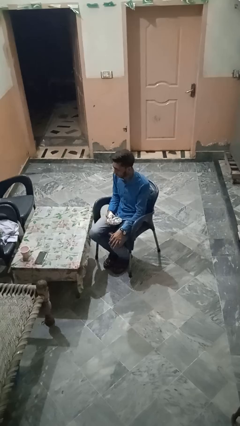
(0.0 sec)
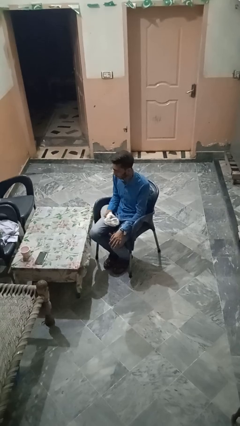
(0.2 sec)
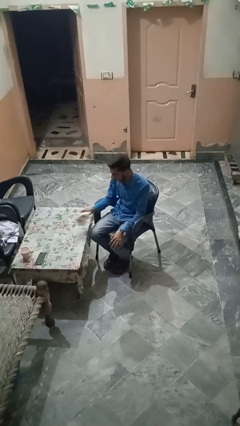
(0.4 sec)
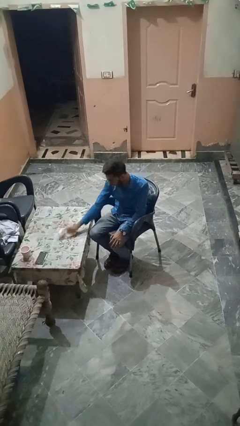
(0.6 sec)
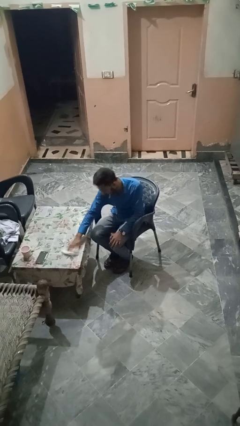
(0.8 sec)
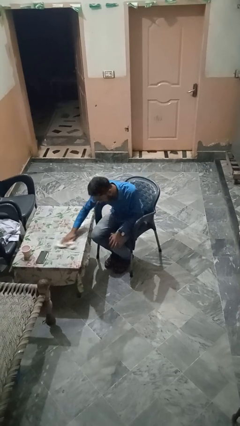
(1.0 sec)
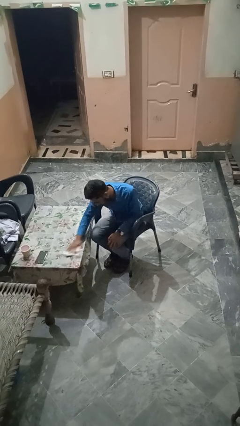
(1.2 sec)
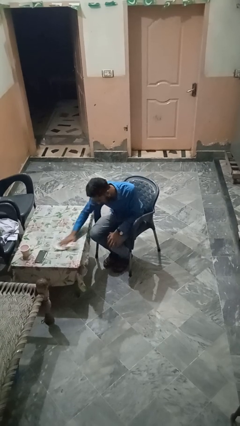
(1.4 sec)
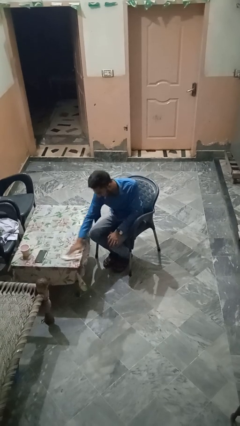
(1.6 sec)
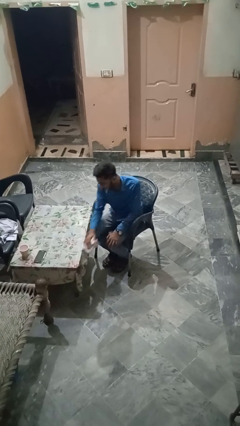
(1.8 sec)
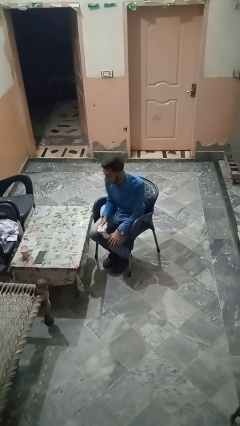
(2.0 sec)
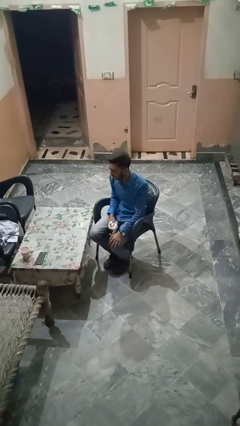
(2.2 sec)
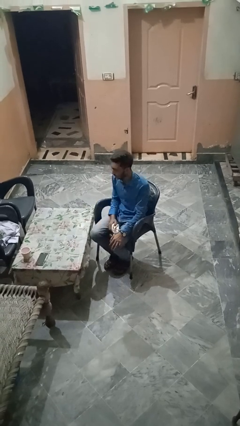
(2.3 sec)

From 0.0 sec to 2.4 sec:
person cleans table with rag

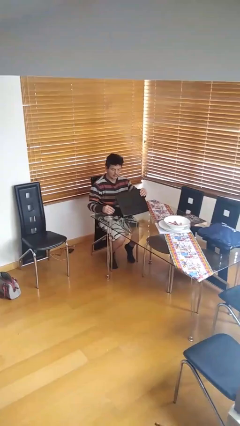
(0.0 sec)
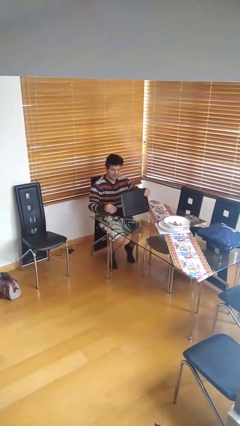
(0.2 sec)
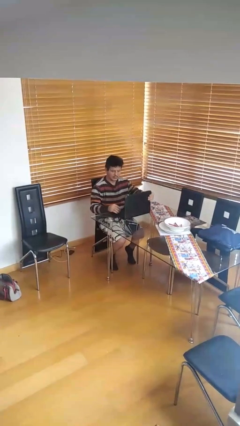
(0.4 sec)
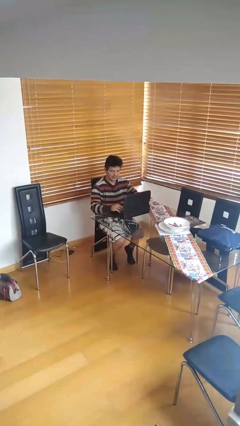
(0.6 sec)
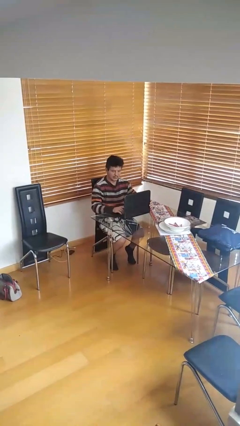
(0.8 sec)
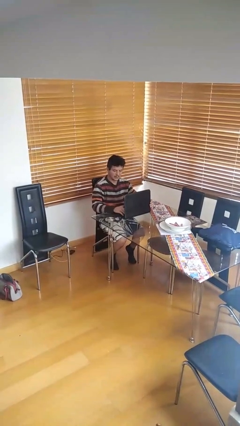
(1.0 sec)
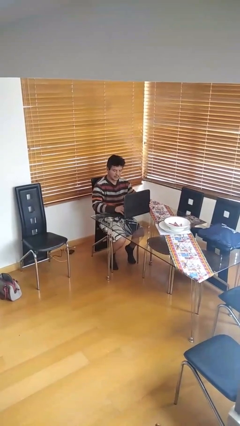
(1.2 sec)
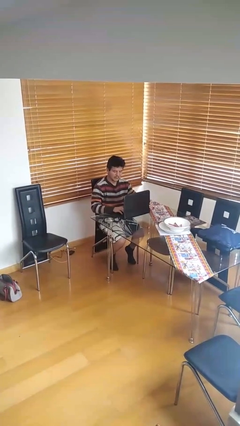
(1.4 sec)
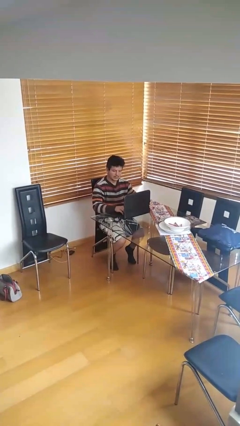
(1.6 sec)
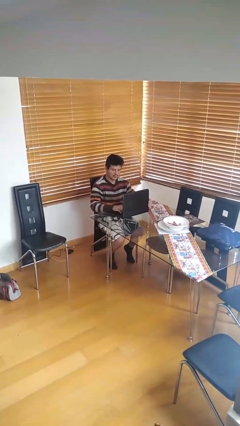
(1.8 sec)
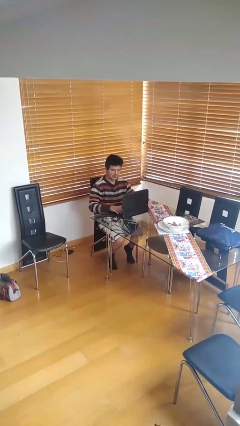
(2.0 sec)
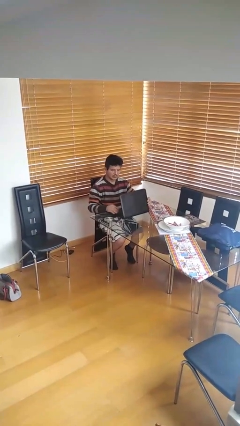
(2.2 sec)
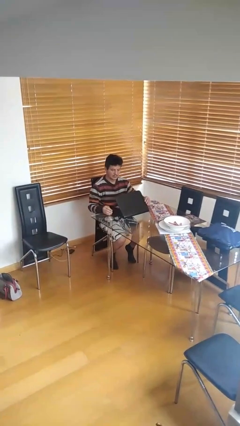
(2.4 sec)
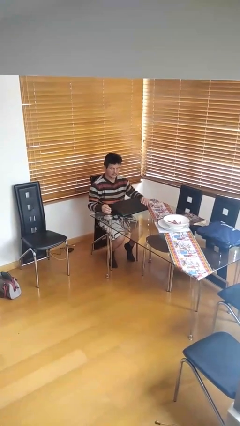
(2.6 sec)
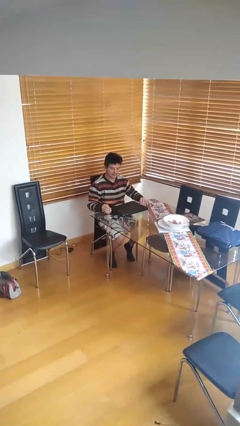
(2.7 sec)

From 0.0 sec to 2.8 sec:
person interacts with laptop

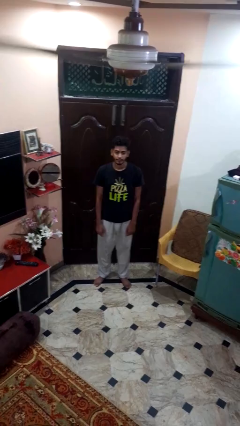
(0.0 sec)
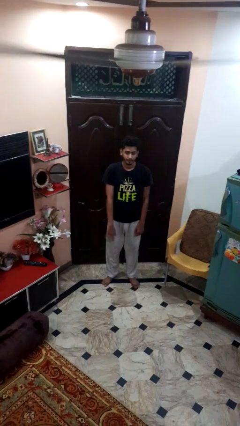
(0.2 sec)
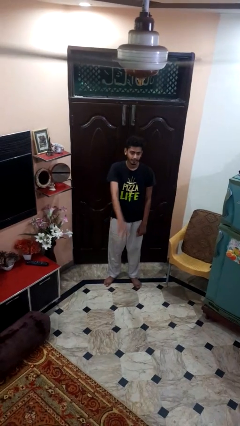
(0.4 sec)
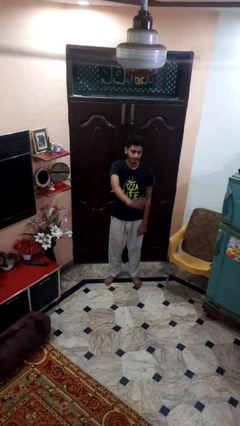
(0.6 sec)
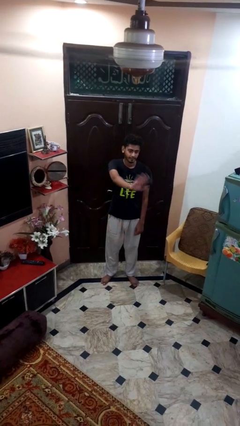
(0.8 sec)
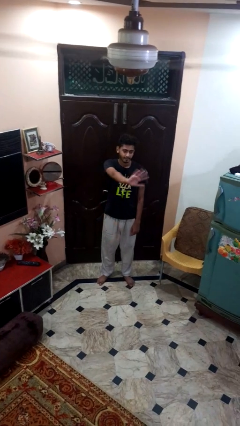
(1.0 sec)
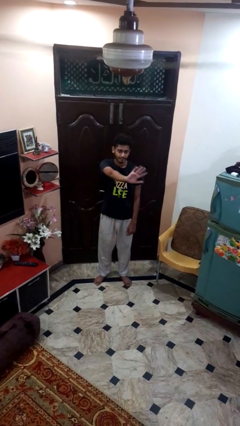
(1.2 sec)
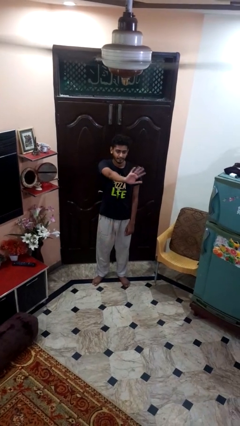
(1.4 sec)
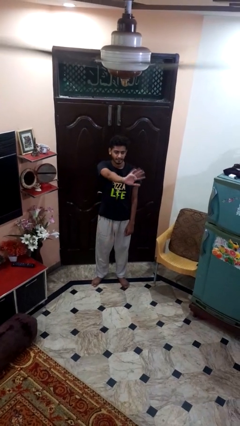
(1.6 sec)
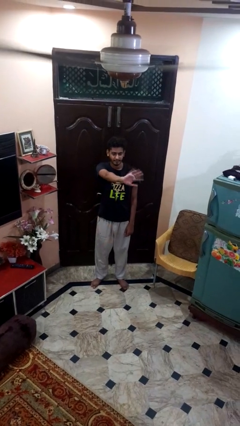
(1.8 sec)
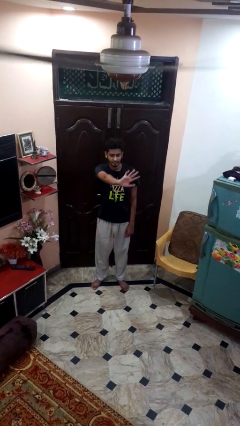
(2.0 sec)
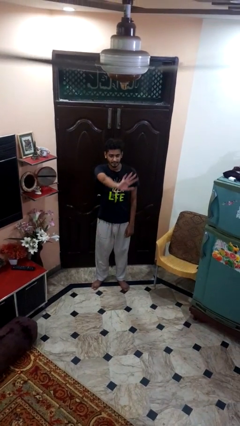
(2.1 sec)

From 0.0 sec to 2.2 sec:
person waves at person

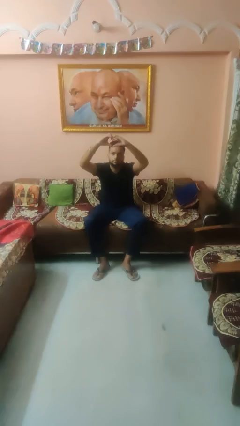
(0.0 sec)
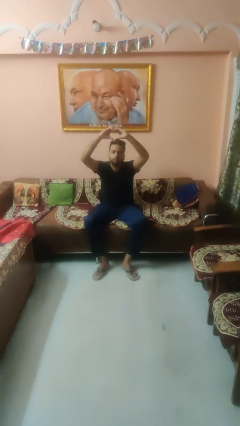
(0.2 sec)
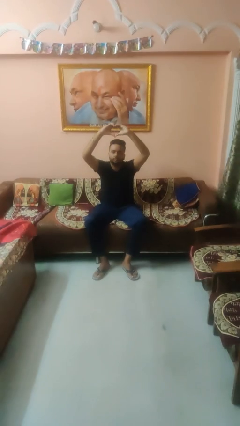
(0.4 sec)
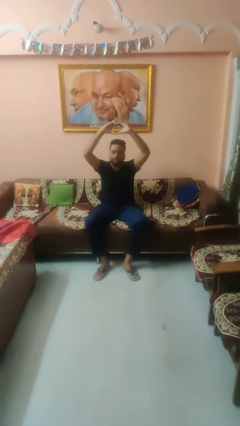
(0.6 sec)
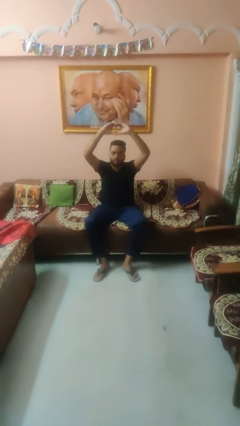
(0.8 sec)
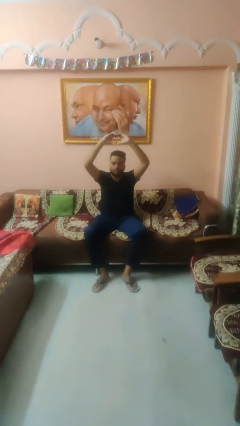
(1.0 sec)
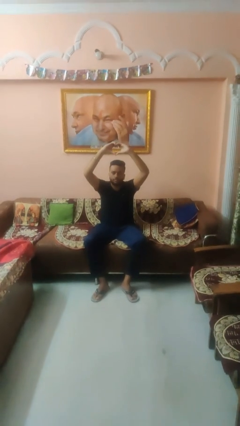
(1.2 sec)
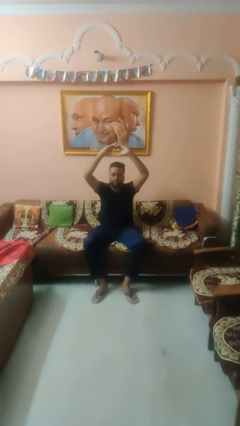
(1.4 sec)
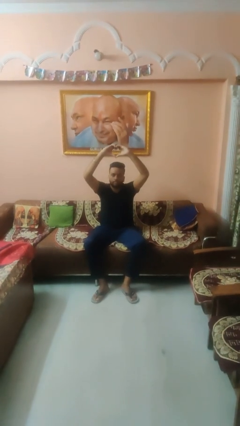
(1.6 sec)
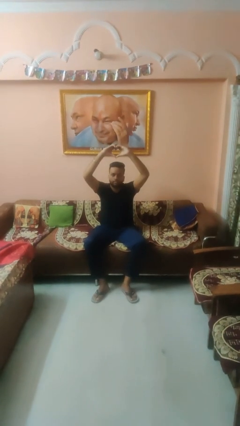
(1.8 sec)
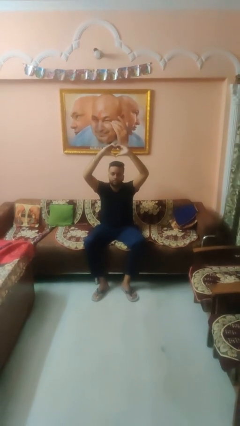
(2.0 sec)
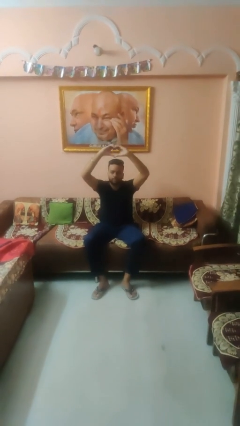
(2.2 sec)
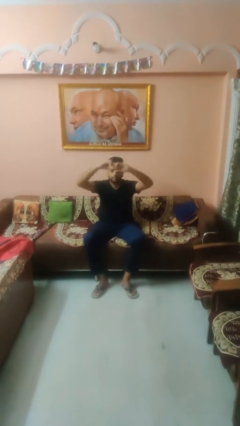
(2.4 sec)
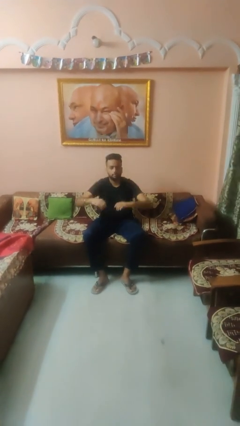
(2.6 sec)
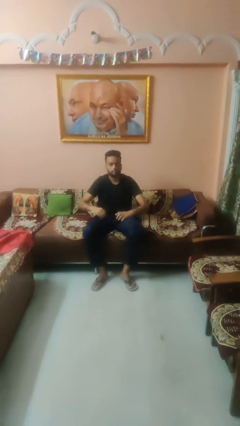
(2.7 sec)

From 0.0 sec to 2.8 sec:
person gestures heart

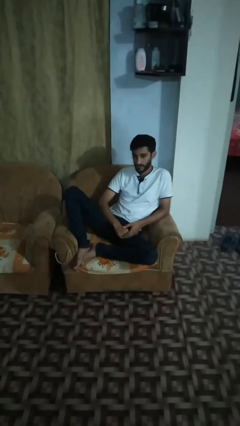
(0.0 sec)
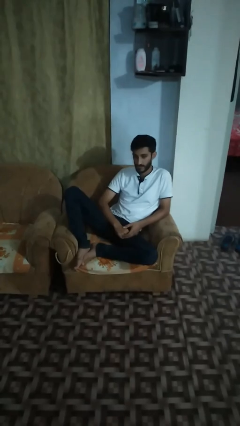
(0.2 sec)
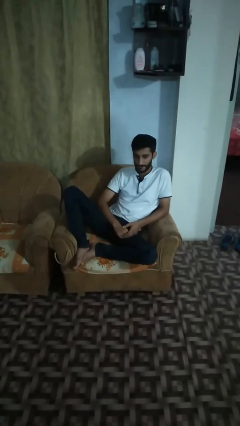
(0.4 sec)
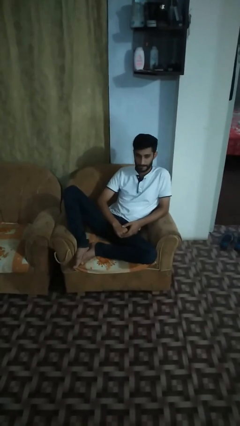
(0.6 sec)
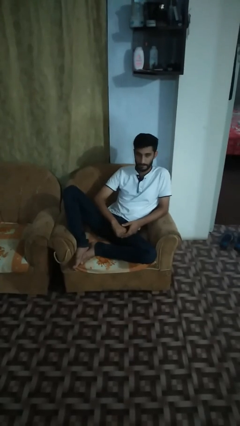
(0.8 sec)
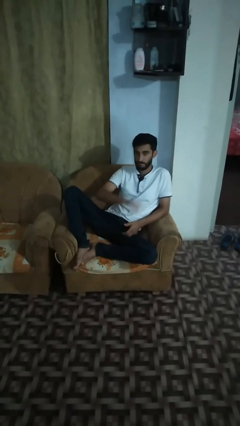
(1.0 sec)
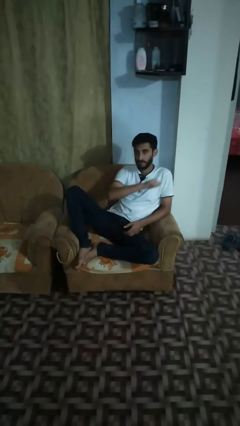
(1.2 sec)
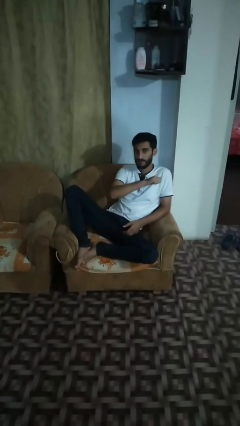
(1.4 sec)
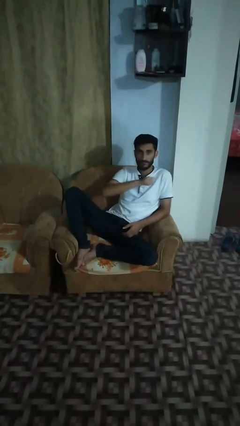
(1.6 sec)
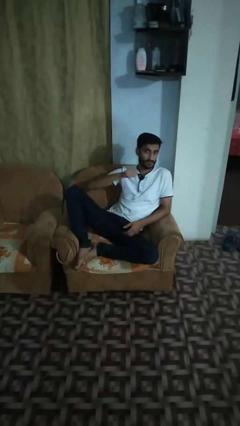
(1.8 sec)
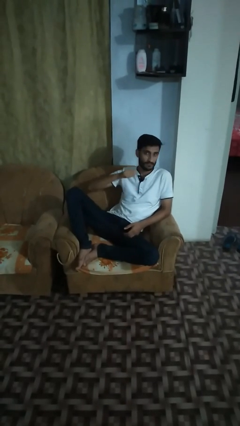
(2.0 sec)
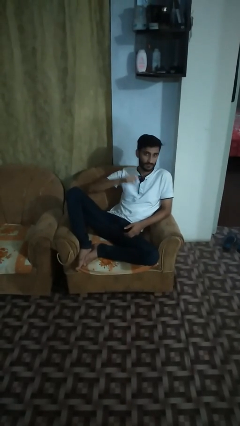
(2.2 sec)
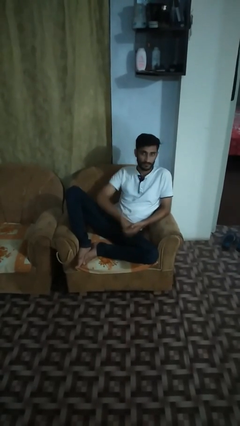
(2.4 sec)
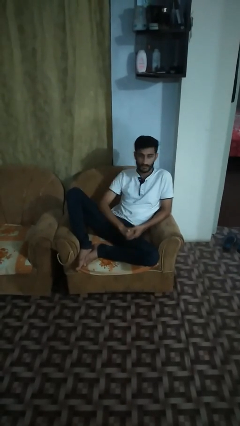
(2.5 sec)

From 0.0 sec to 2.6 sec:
person gestures cut

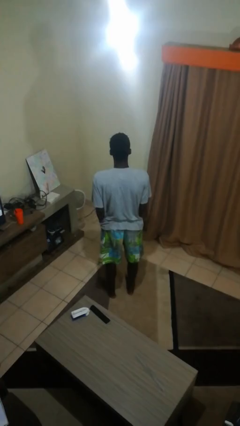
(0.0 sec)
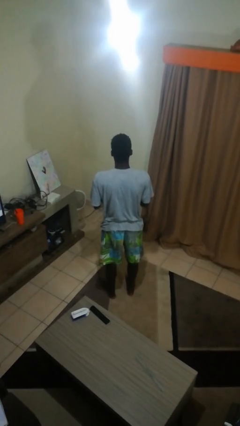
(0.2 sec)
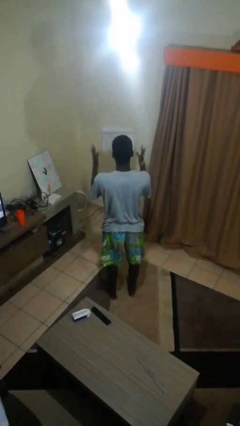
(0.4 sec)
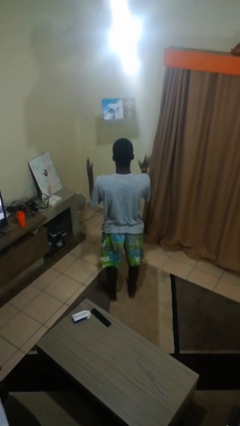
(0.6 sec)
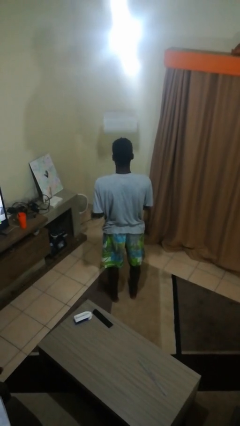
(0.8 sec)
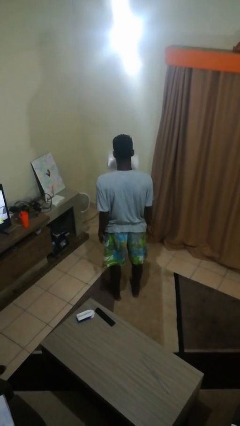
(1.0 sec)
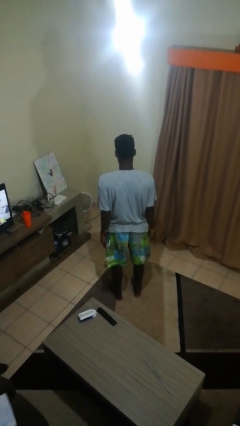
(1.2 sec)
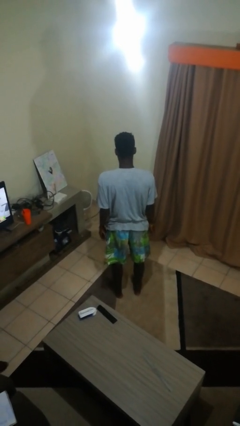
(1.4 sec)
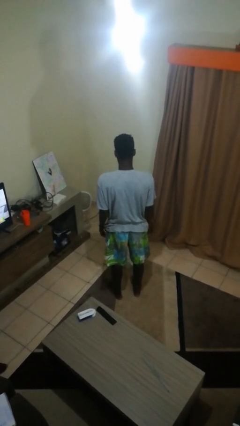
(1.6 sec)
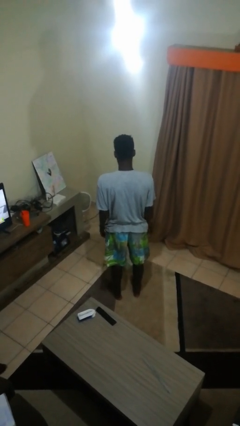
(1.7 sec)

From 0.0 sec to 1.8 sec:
person throws object into air

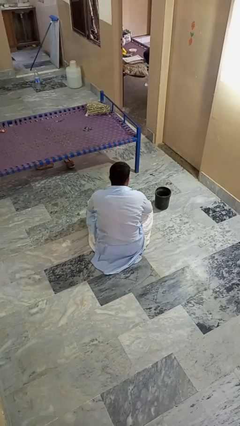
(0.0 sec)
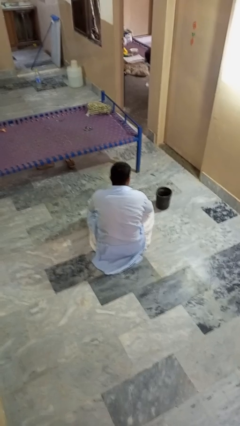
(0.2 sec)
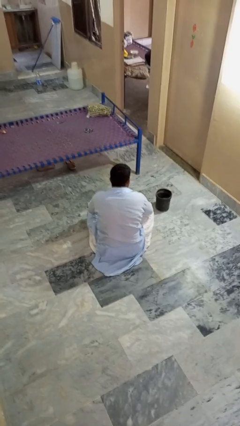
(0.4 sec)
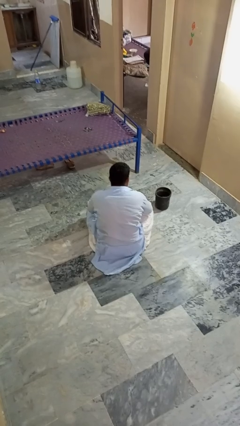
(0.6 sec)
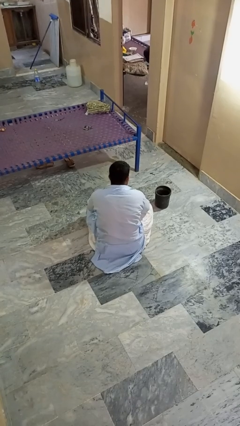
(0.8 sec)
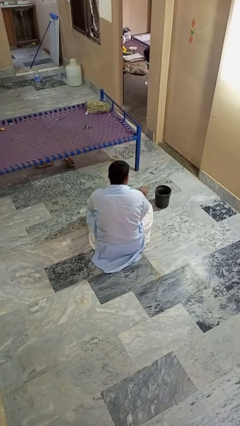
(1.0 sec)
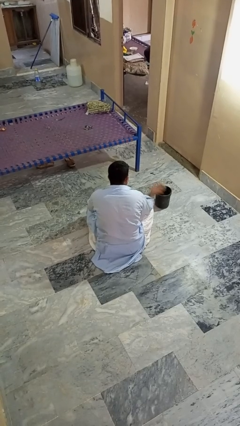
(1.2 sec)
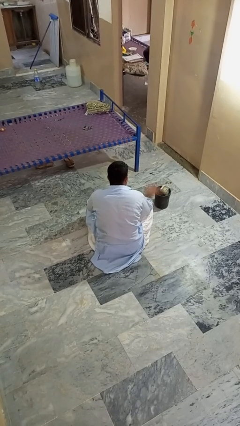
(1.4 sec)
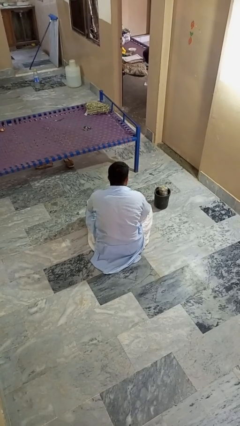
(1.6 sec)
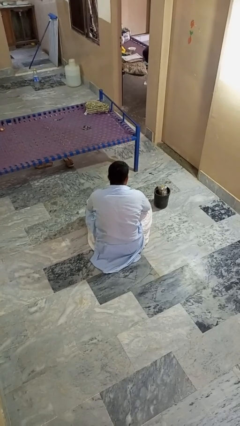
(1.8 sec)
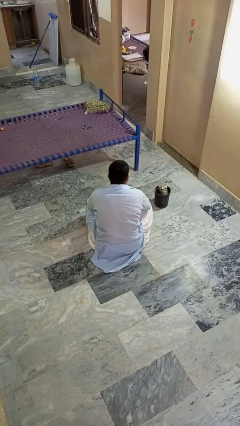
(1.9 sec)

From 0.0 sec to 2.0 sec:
person puts object into basket
